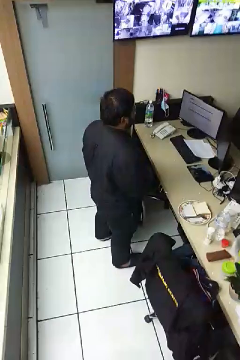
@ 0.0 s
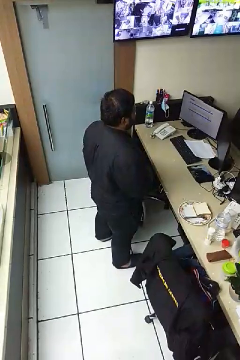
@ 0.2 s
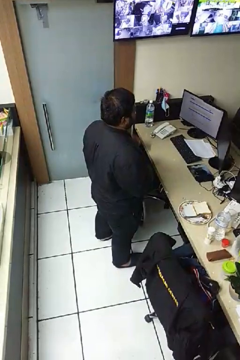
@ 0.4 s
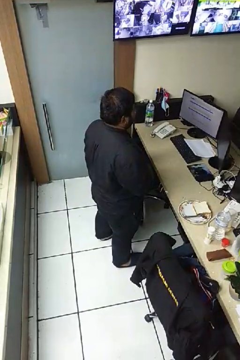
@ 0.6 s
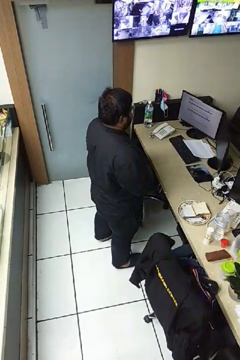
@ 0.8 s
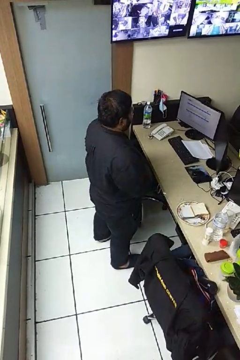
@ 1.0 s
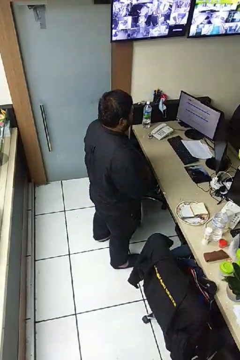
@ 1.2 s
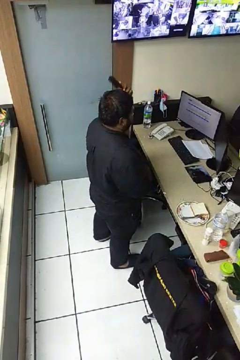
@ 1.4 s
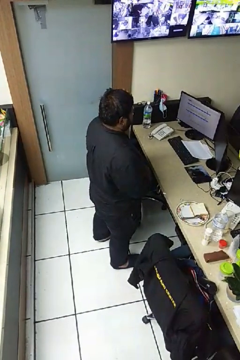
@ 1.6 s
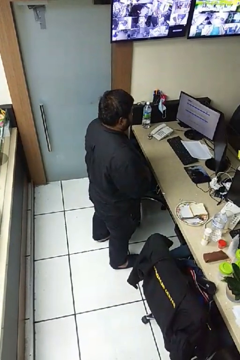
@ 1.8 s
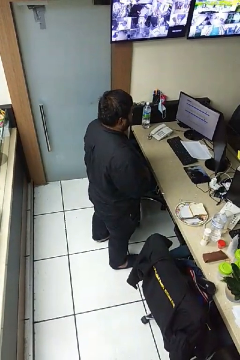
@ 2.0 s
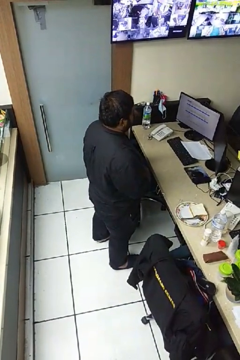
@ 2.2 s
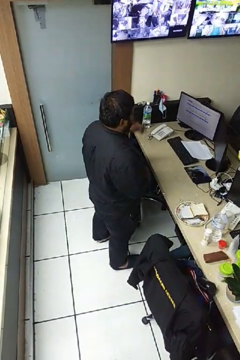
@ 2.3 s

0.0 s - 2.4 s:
person brushes hair

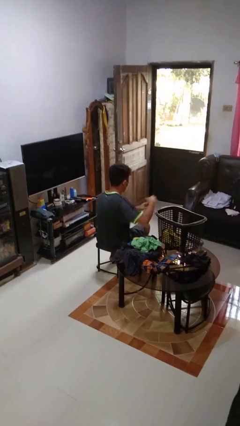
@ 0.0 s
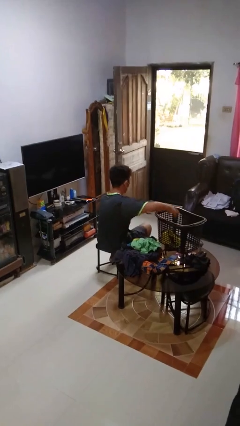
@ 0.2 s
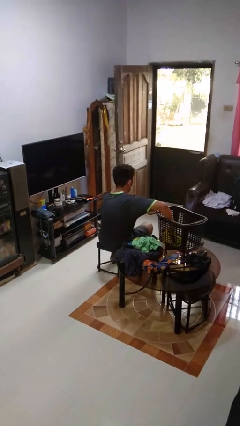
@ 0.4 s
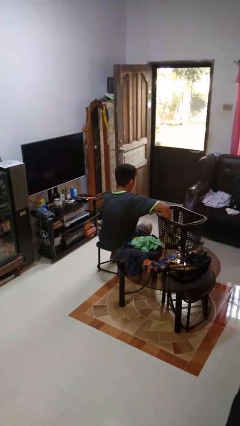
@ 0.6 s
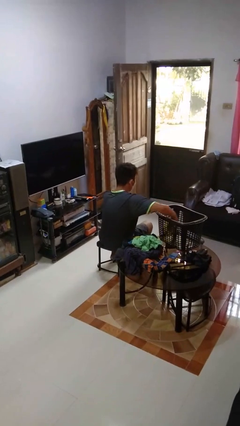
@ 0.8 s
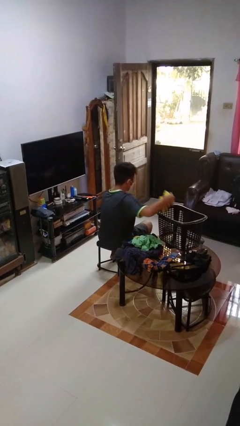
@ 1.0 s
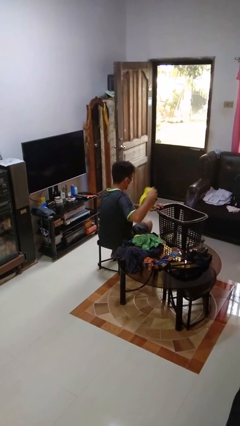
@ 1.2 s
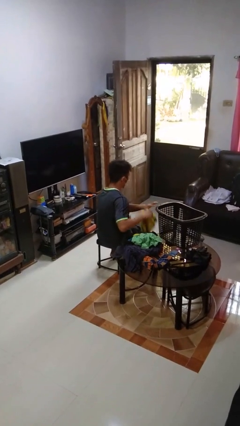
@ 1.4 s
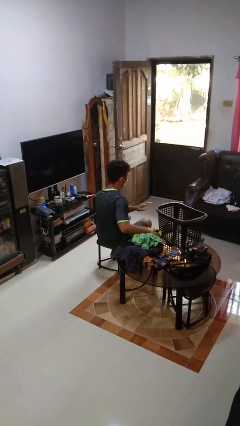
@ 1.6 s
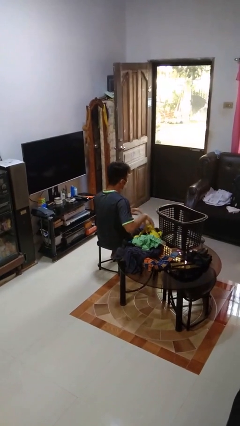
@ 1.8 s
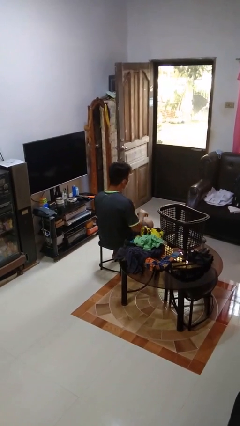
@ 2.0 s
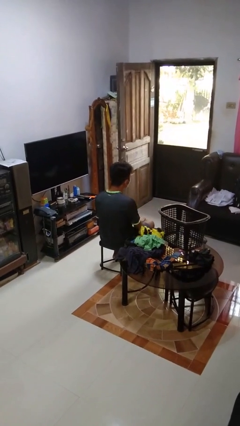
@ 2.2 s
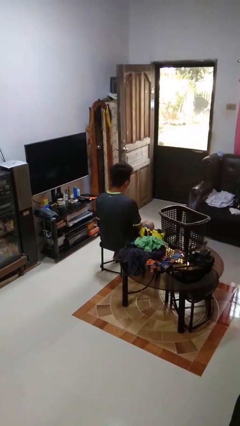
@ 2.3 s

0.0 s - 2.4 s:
person takes object from basket

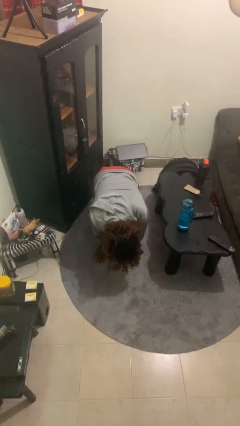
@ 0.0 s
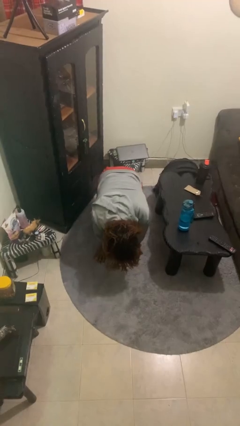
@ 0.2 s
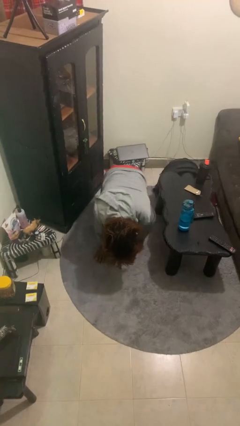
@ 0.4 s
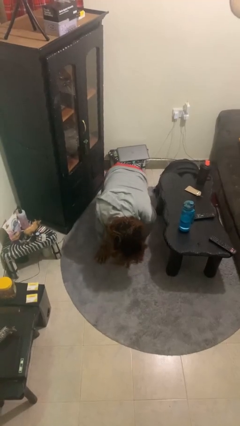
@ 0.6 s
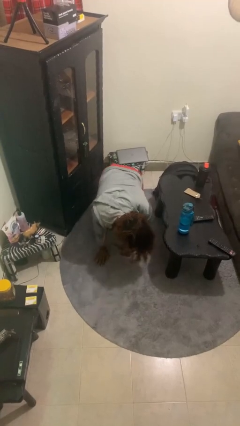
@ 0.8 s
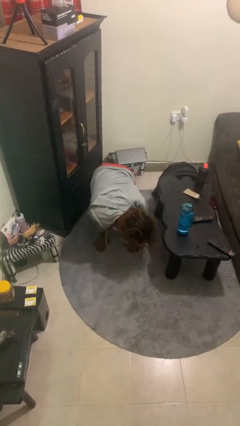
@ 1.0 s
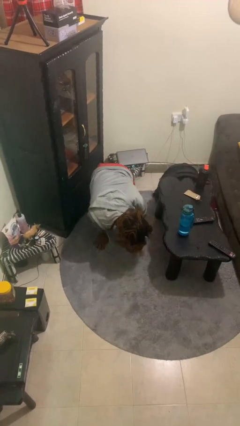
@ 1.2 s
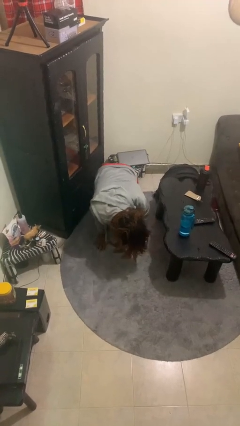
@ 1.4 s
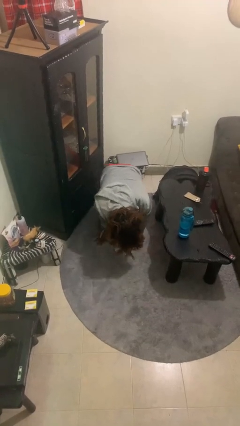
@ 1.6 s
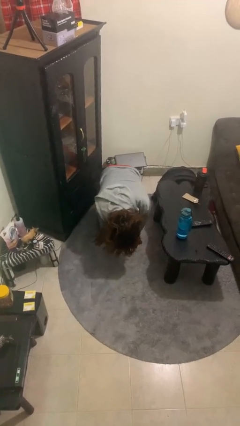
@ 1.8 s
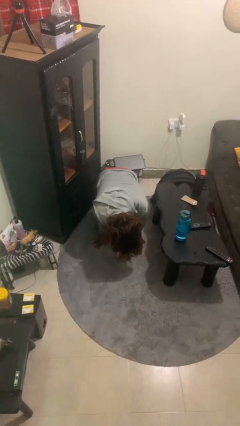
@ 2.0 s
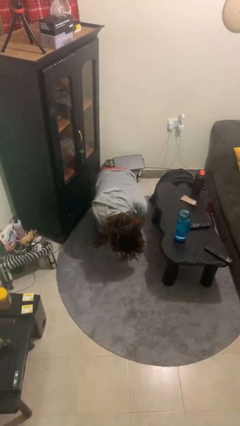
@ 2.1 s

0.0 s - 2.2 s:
person crawls

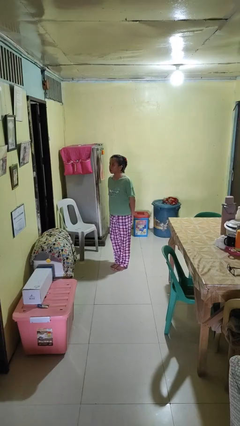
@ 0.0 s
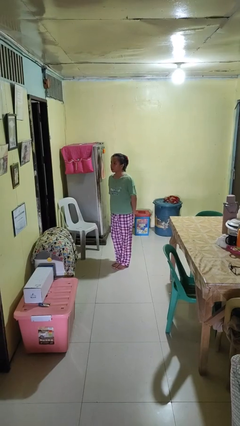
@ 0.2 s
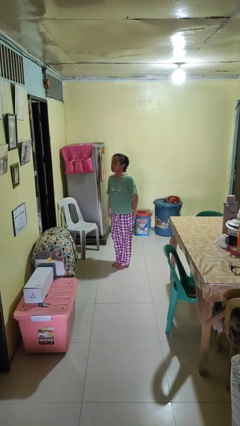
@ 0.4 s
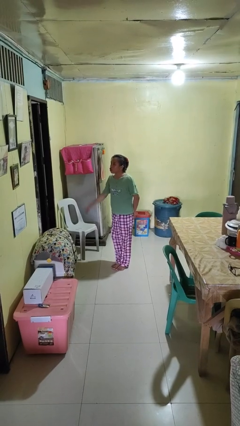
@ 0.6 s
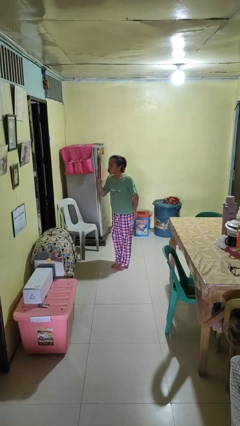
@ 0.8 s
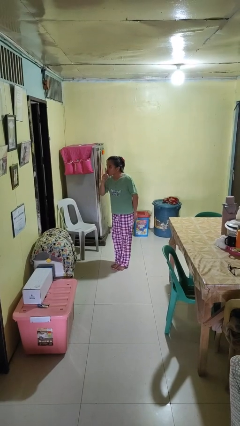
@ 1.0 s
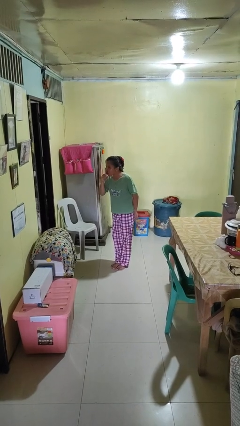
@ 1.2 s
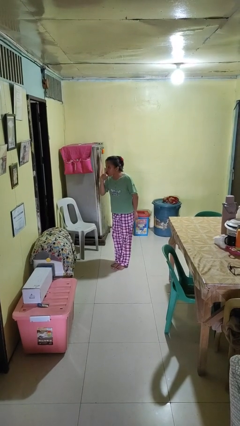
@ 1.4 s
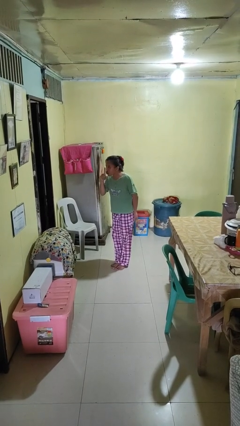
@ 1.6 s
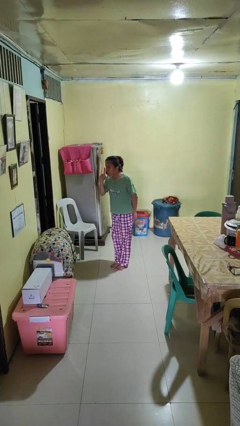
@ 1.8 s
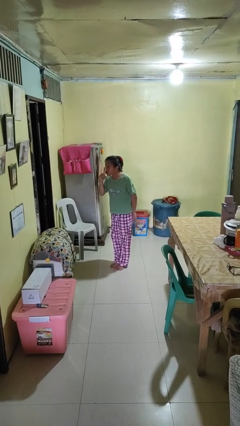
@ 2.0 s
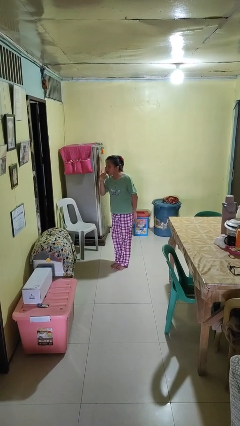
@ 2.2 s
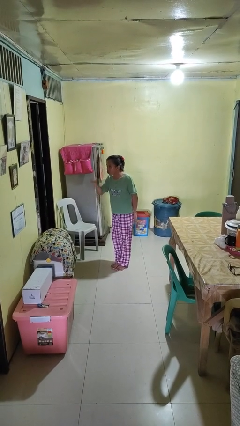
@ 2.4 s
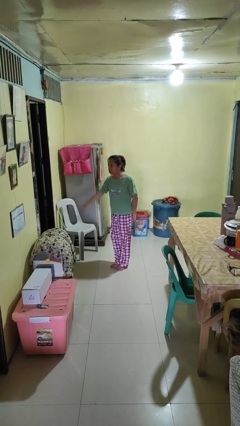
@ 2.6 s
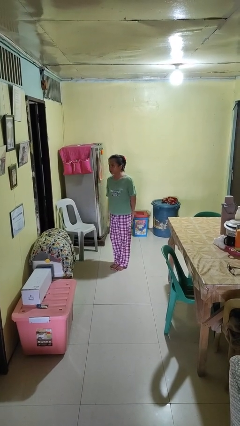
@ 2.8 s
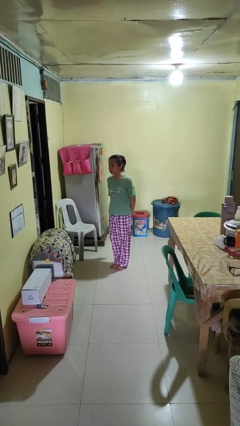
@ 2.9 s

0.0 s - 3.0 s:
person gestures be quiet

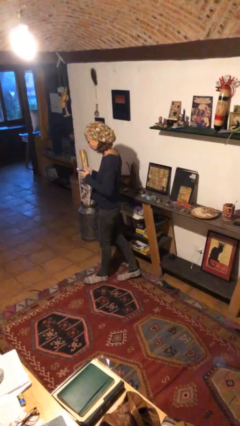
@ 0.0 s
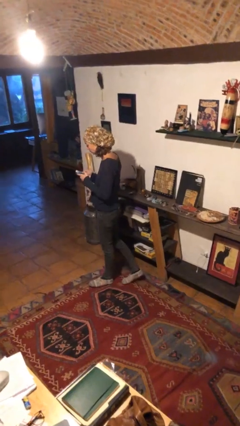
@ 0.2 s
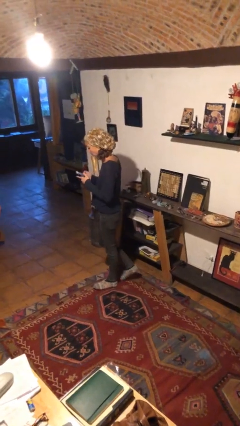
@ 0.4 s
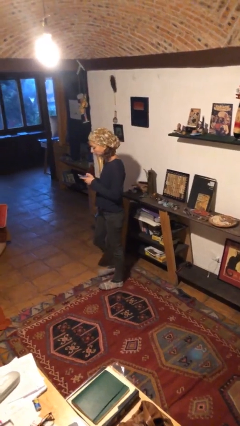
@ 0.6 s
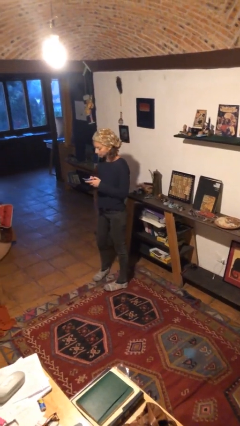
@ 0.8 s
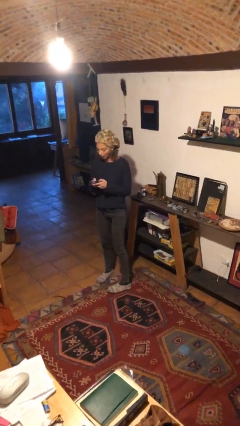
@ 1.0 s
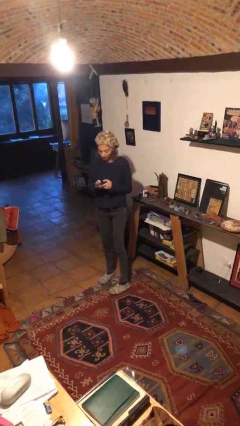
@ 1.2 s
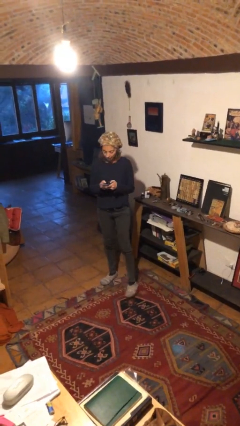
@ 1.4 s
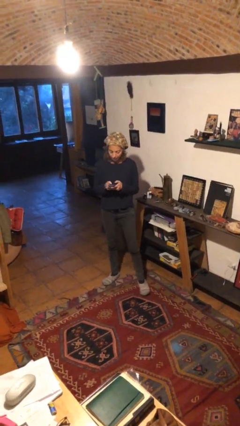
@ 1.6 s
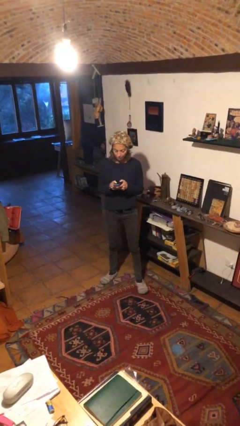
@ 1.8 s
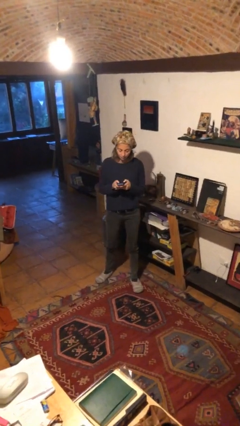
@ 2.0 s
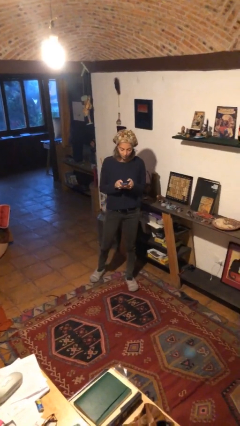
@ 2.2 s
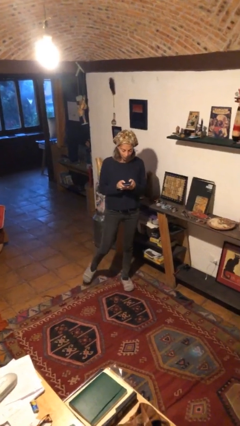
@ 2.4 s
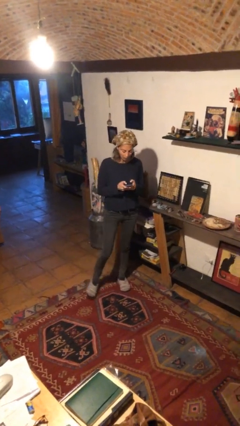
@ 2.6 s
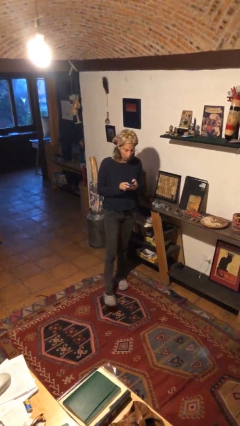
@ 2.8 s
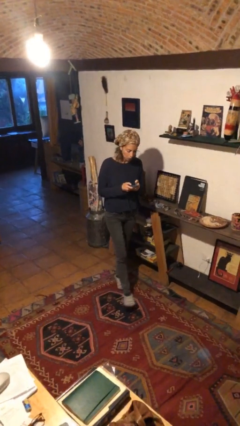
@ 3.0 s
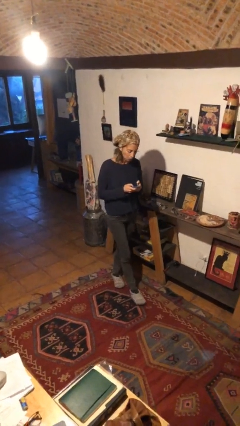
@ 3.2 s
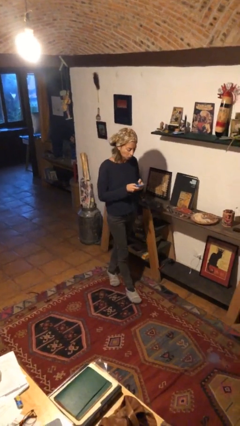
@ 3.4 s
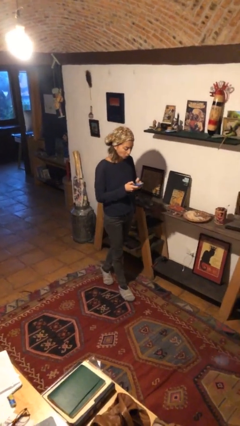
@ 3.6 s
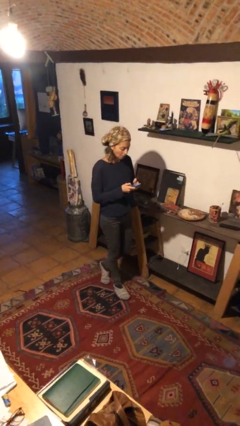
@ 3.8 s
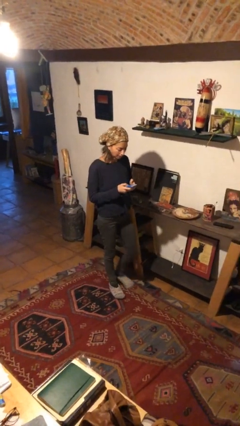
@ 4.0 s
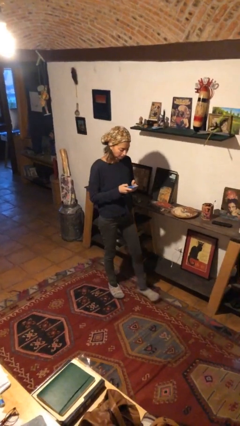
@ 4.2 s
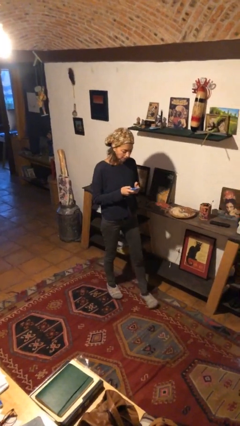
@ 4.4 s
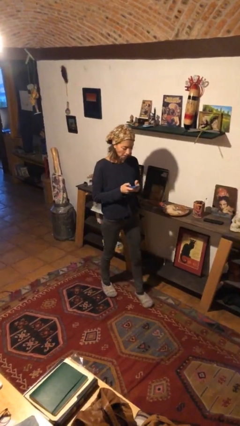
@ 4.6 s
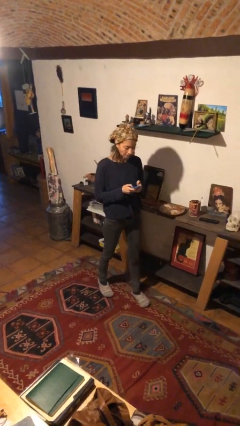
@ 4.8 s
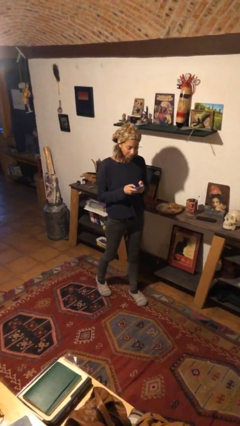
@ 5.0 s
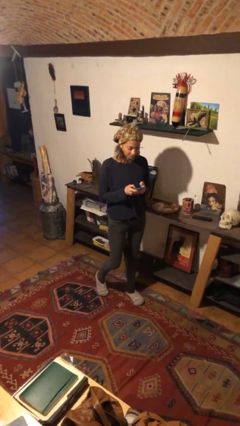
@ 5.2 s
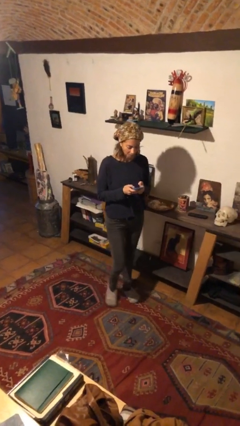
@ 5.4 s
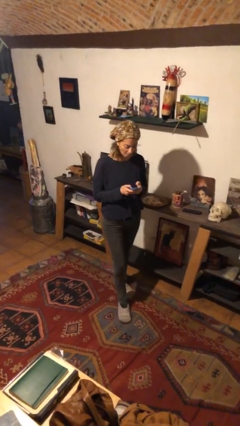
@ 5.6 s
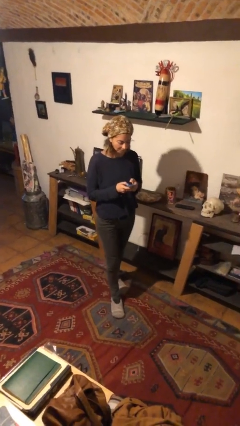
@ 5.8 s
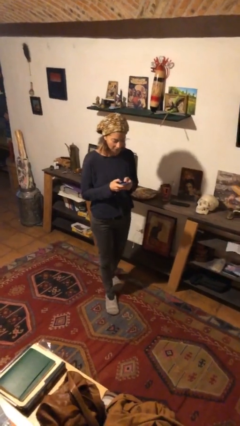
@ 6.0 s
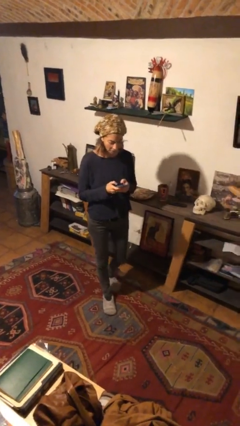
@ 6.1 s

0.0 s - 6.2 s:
person texts on phone

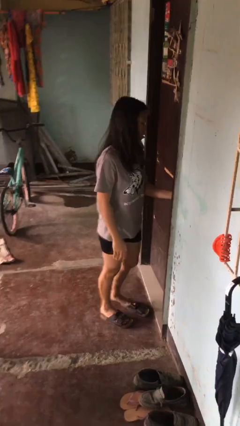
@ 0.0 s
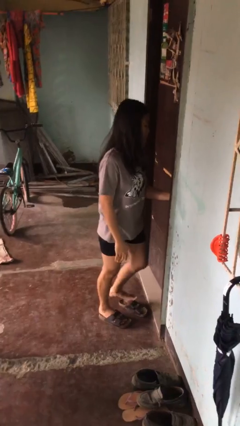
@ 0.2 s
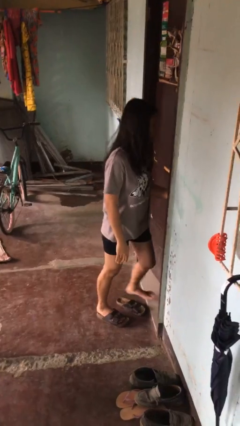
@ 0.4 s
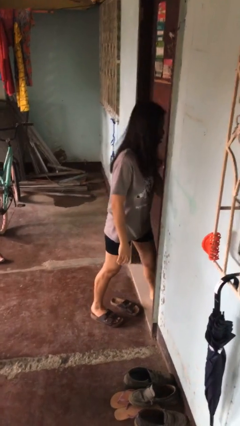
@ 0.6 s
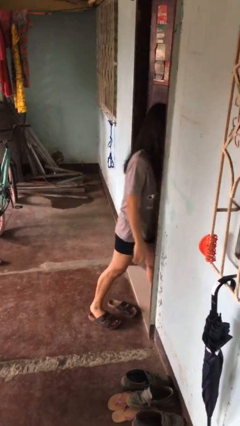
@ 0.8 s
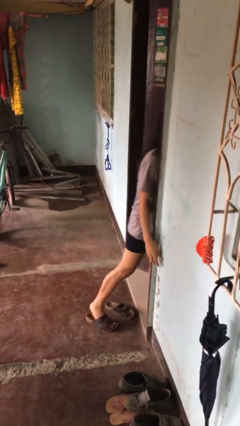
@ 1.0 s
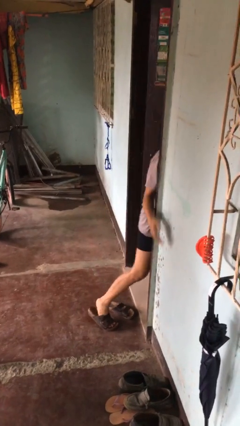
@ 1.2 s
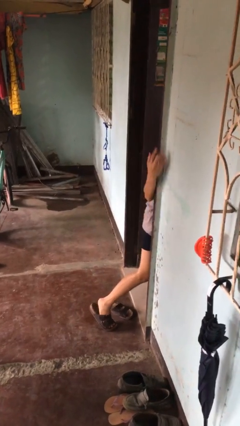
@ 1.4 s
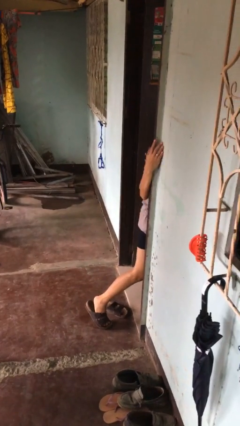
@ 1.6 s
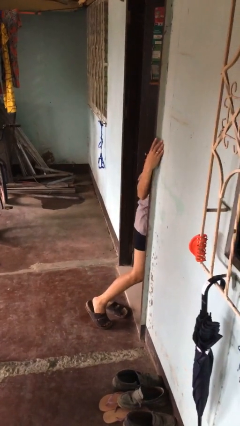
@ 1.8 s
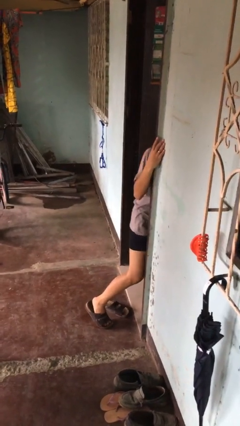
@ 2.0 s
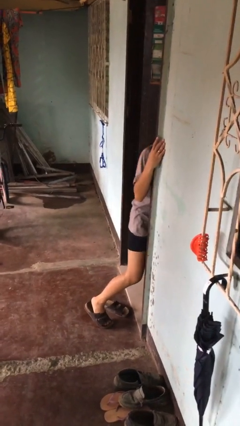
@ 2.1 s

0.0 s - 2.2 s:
person opens facility door
